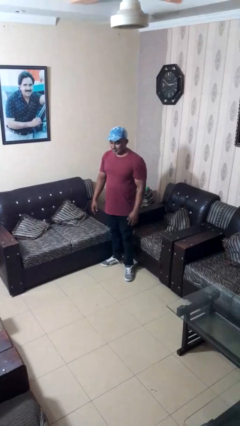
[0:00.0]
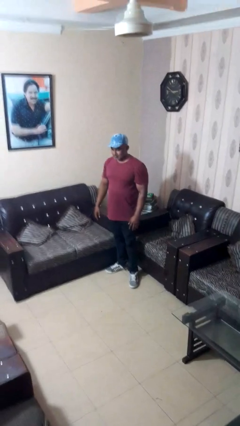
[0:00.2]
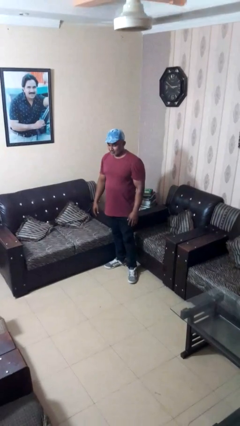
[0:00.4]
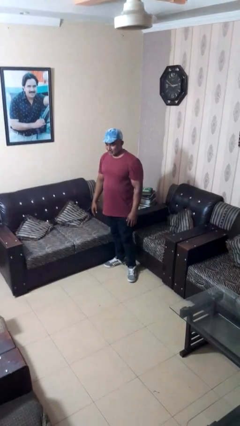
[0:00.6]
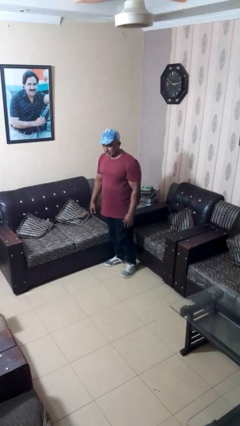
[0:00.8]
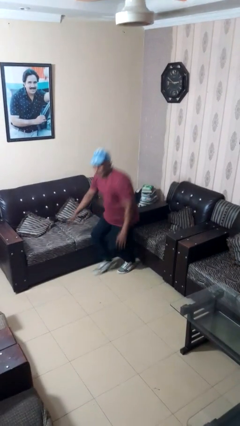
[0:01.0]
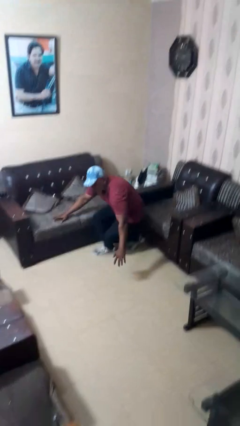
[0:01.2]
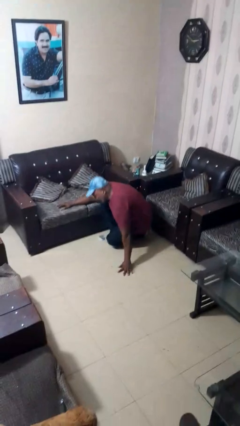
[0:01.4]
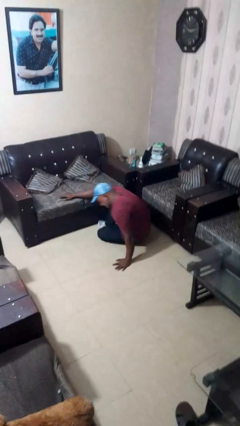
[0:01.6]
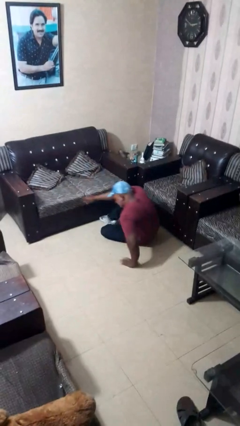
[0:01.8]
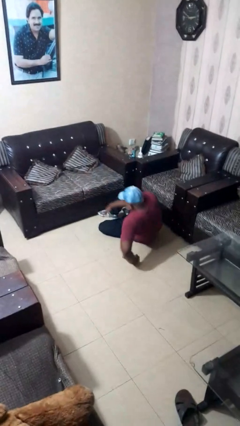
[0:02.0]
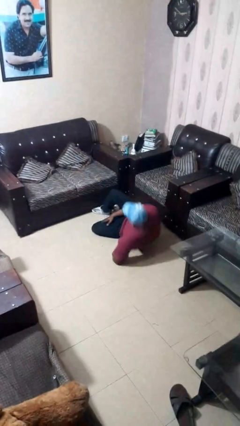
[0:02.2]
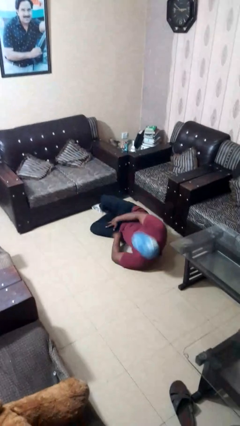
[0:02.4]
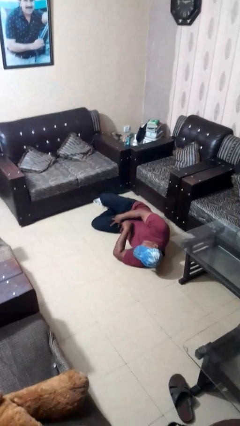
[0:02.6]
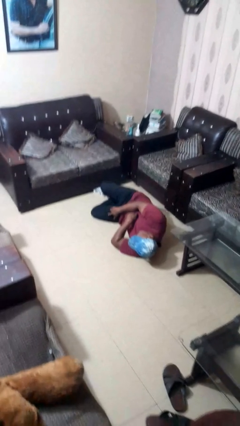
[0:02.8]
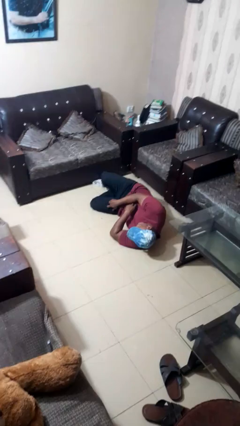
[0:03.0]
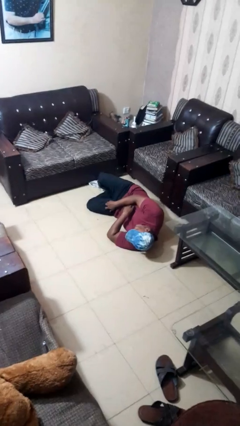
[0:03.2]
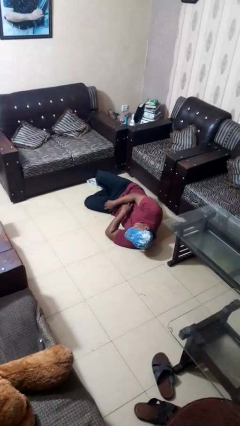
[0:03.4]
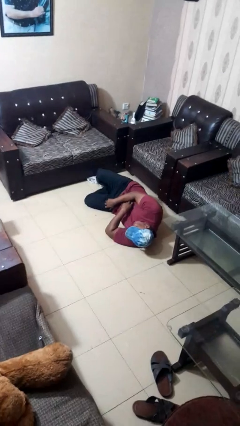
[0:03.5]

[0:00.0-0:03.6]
person falls while standing

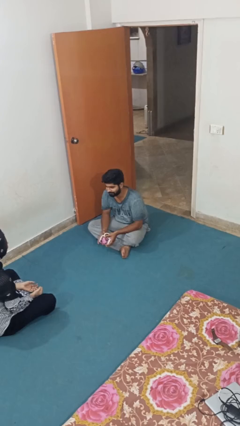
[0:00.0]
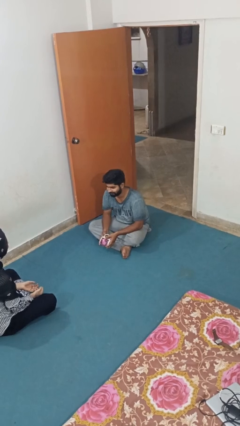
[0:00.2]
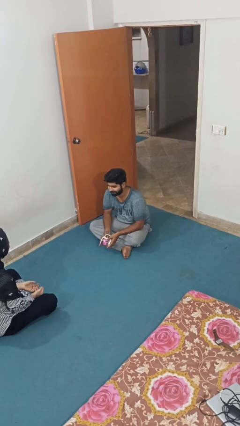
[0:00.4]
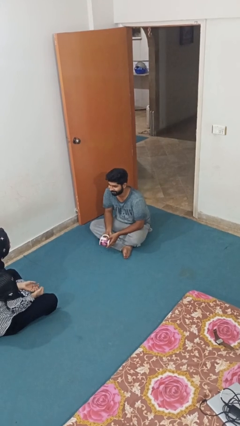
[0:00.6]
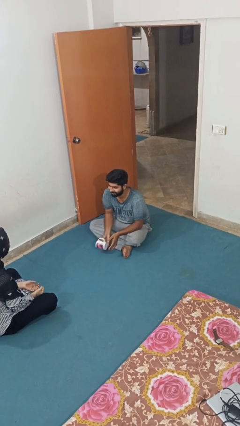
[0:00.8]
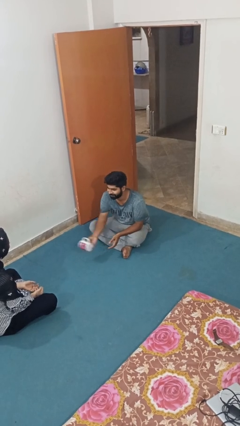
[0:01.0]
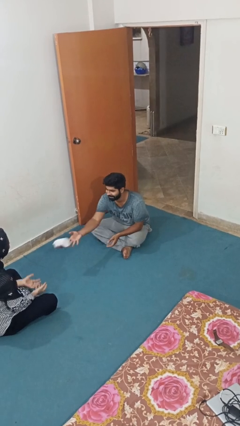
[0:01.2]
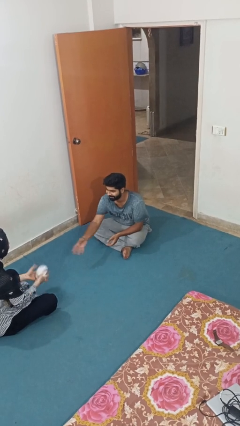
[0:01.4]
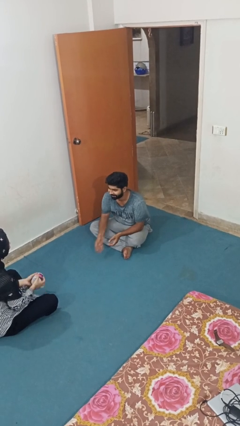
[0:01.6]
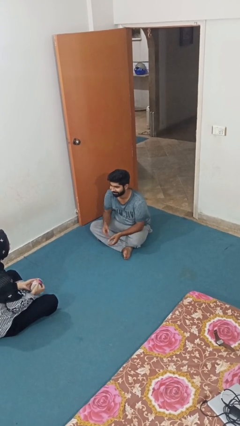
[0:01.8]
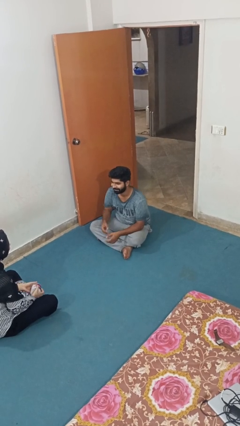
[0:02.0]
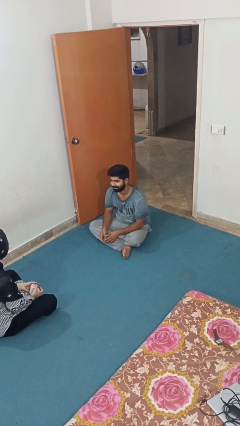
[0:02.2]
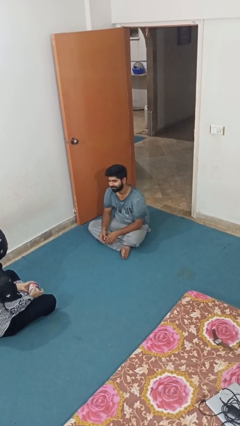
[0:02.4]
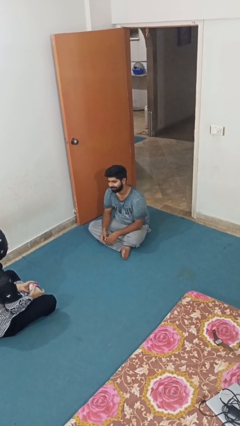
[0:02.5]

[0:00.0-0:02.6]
person throws object to person

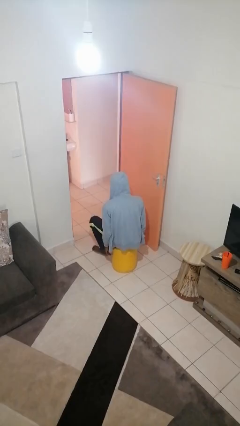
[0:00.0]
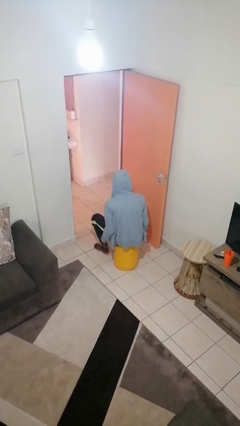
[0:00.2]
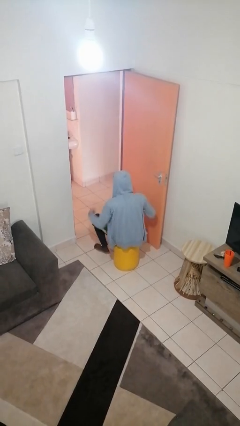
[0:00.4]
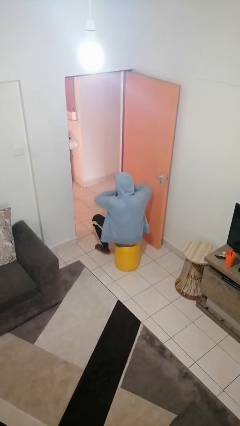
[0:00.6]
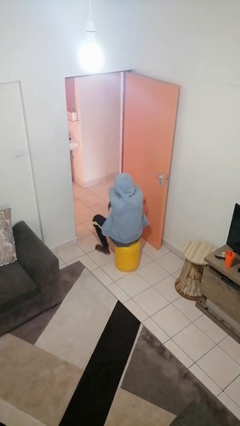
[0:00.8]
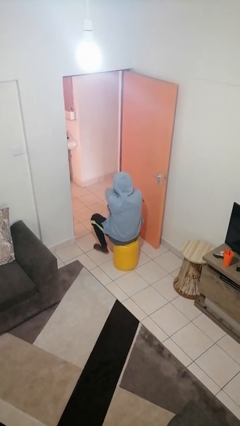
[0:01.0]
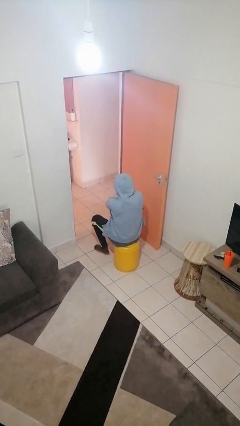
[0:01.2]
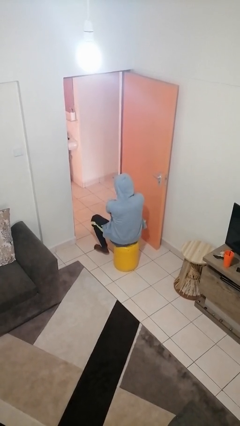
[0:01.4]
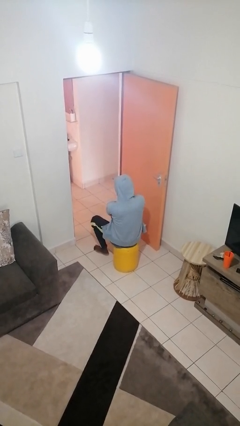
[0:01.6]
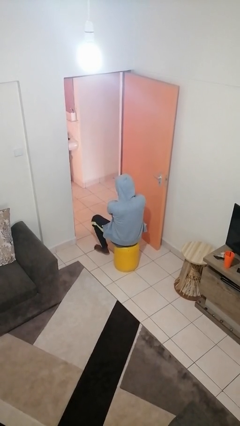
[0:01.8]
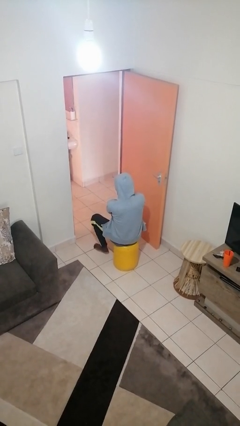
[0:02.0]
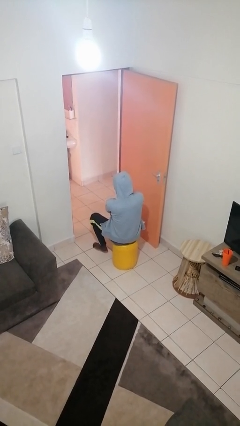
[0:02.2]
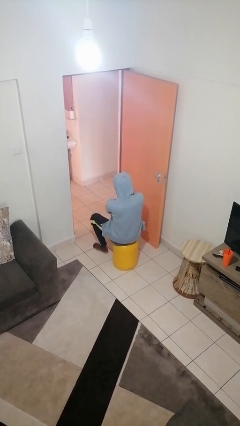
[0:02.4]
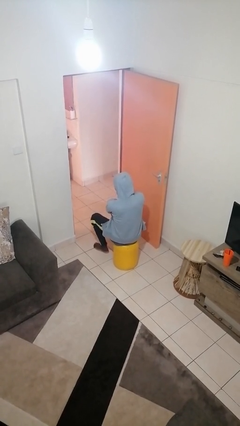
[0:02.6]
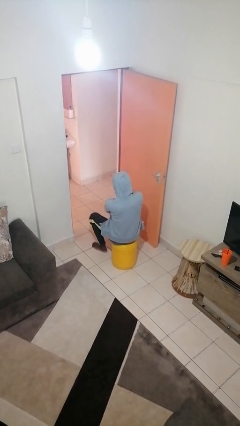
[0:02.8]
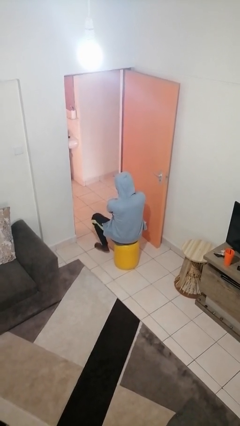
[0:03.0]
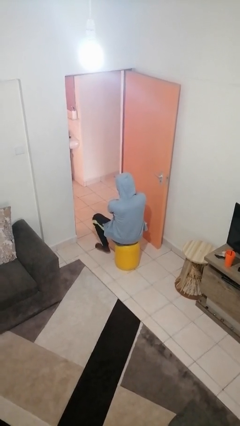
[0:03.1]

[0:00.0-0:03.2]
person crosses arms

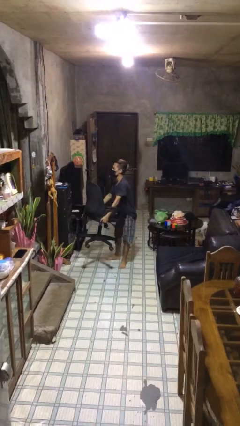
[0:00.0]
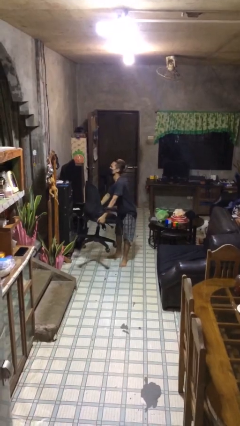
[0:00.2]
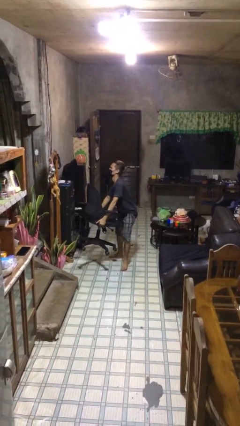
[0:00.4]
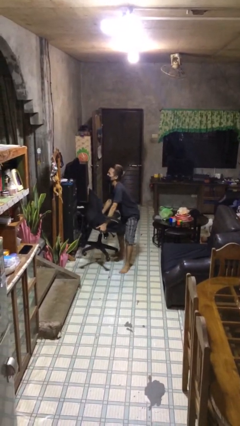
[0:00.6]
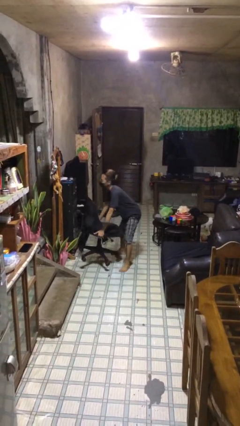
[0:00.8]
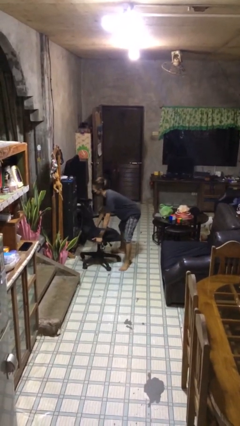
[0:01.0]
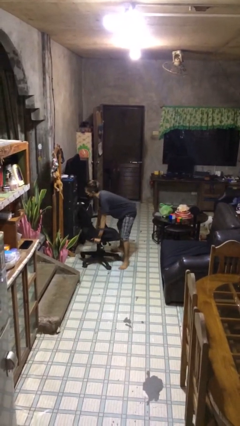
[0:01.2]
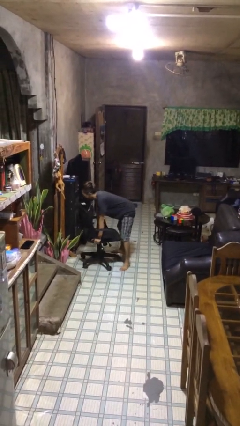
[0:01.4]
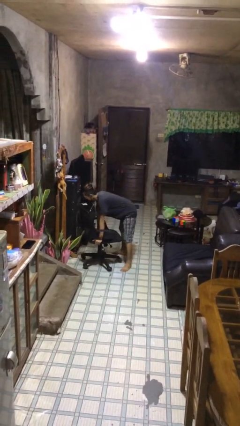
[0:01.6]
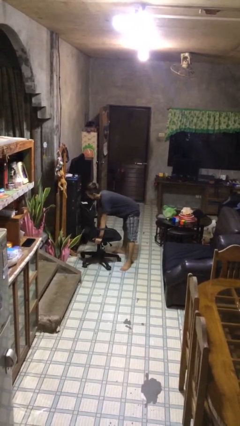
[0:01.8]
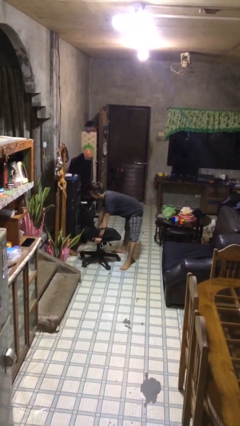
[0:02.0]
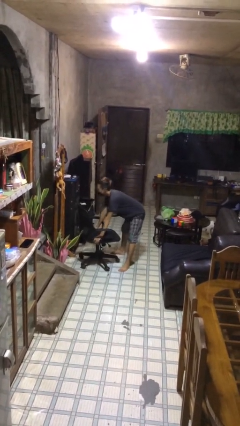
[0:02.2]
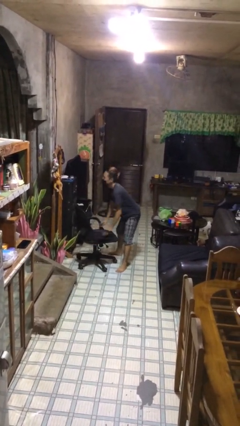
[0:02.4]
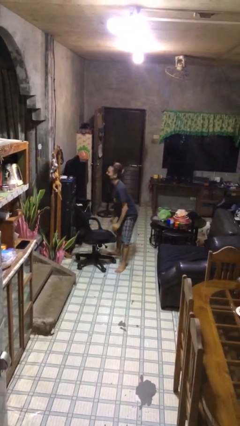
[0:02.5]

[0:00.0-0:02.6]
person puts down object on floor

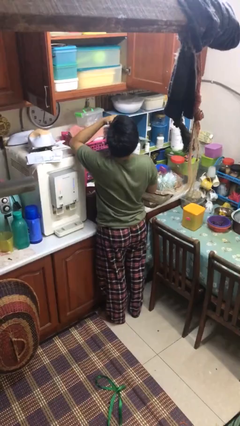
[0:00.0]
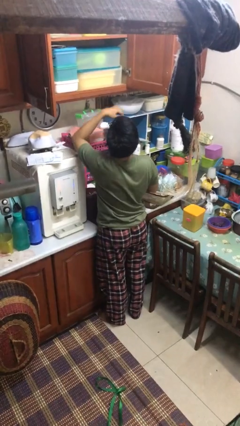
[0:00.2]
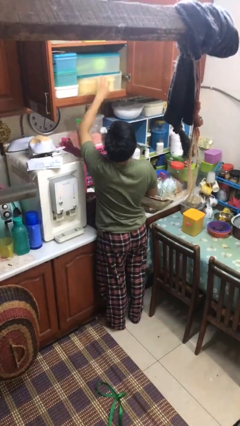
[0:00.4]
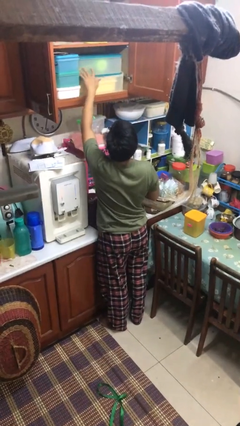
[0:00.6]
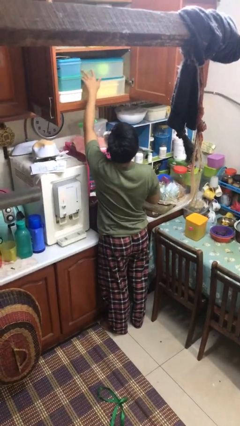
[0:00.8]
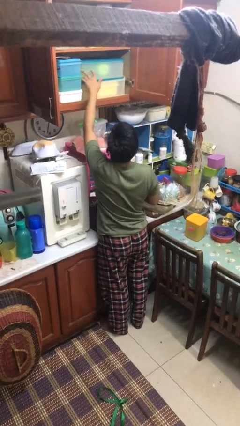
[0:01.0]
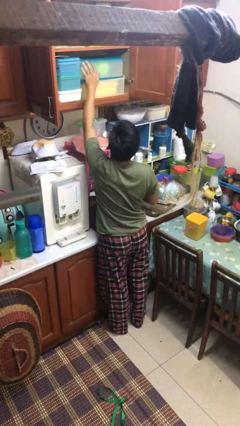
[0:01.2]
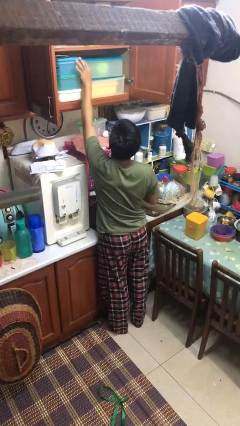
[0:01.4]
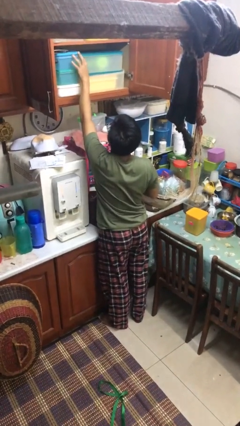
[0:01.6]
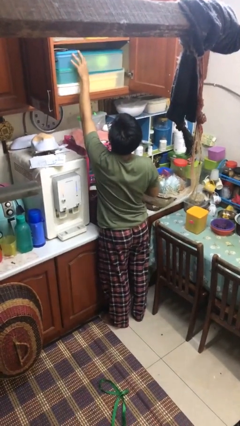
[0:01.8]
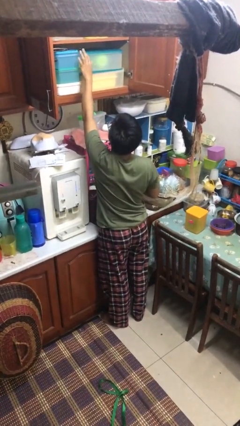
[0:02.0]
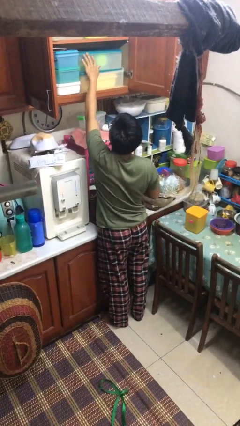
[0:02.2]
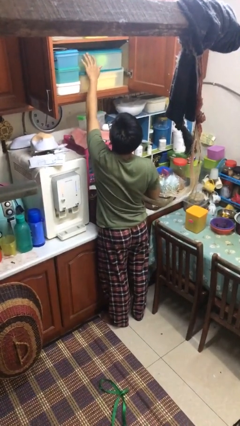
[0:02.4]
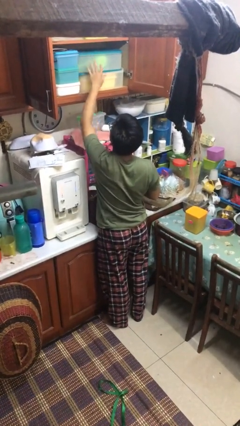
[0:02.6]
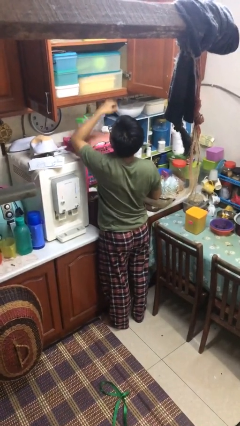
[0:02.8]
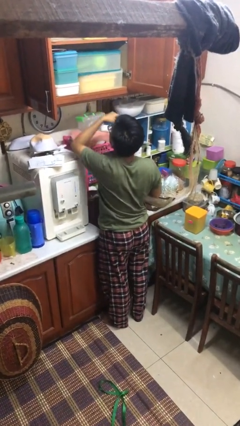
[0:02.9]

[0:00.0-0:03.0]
person searches in kitchen drawer

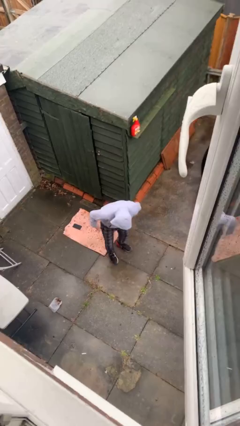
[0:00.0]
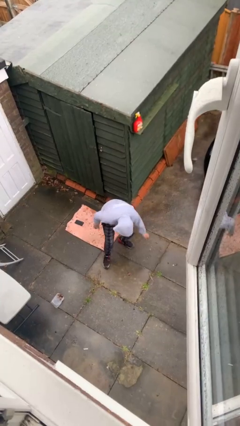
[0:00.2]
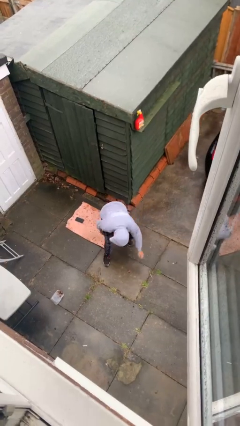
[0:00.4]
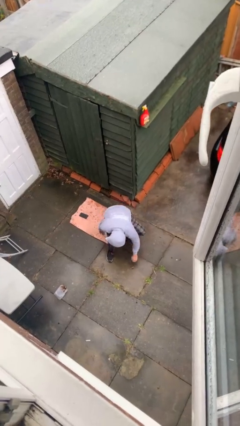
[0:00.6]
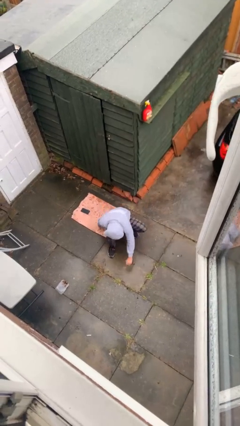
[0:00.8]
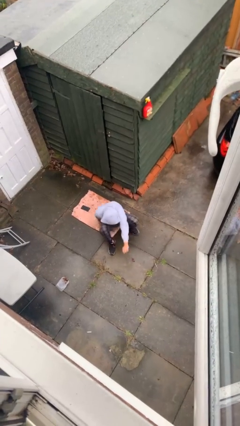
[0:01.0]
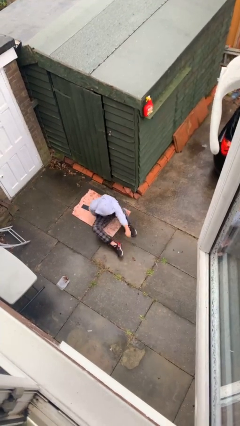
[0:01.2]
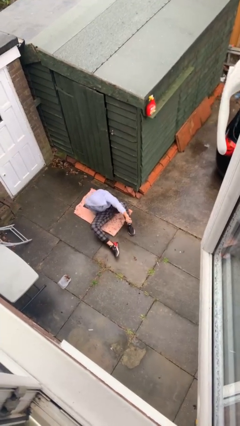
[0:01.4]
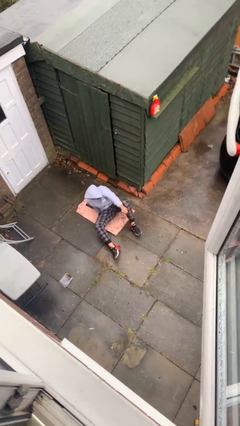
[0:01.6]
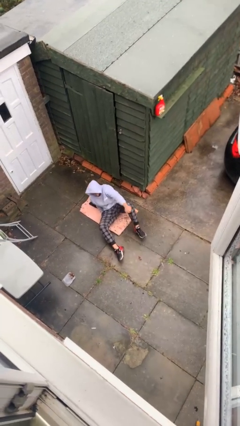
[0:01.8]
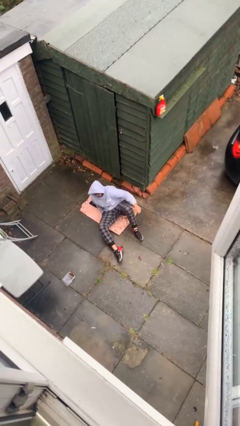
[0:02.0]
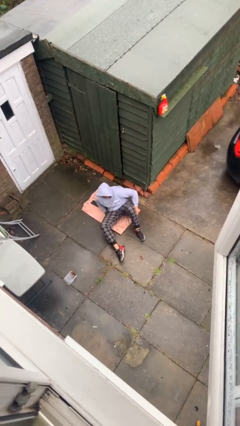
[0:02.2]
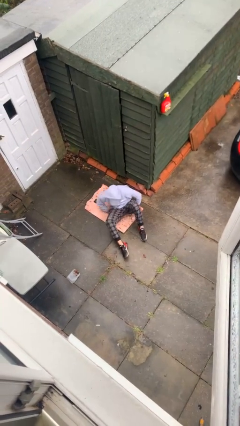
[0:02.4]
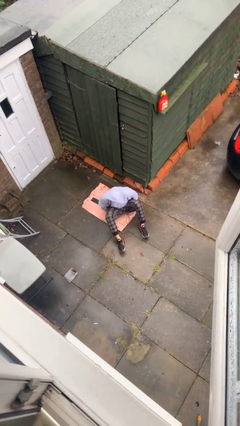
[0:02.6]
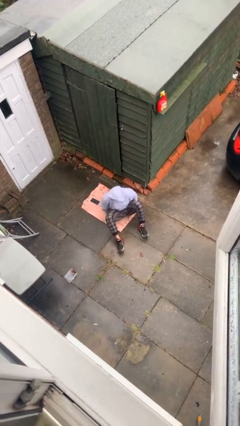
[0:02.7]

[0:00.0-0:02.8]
person sits down
